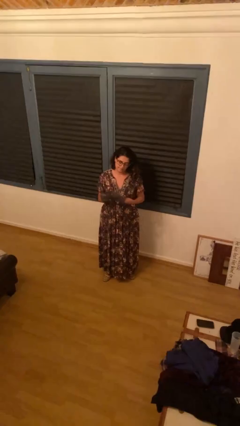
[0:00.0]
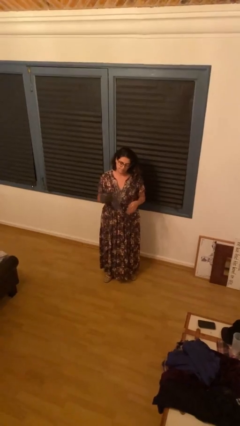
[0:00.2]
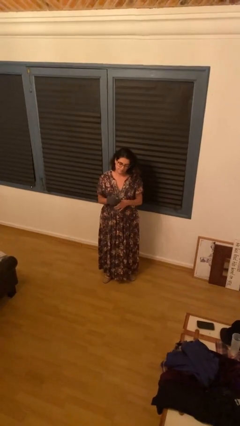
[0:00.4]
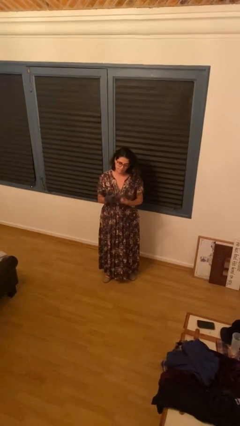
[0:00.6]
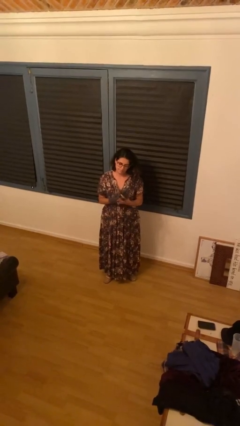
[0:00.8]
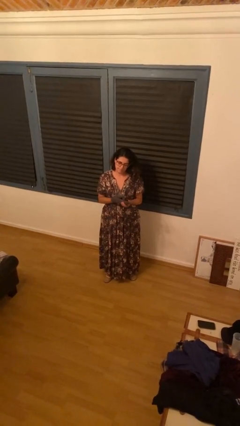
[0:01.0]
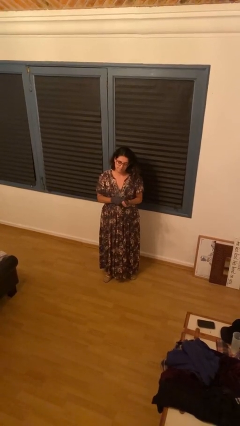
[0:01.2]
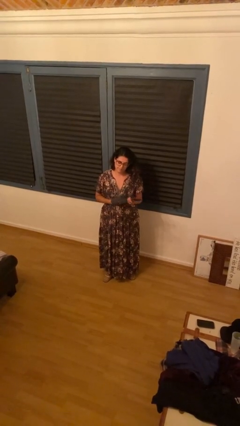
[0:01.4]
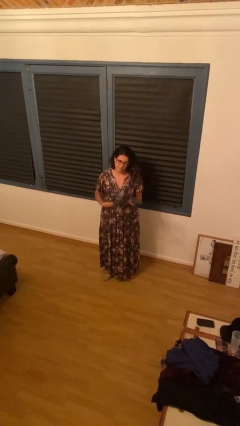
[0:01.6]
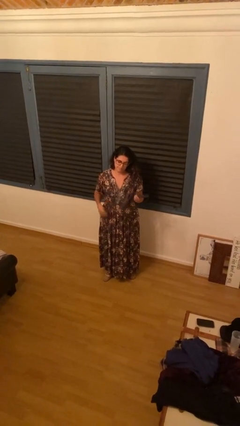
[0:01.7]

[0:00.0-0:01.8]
person takes off gloves

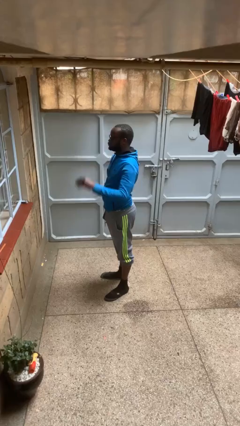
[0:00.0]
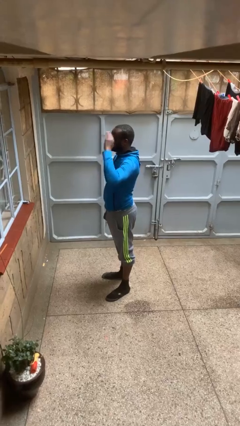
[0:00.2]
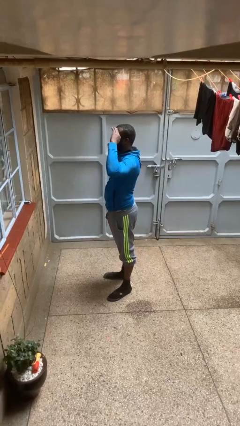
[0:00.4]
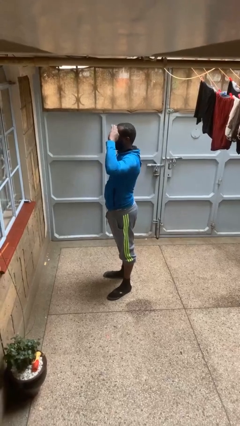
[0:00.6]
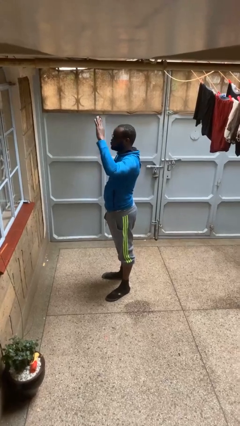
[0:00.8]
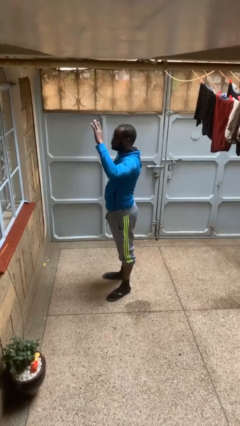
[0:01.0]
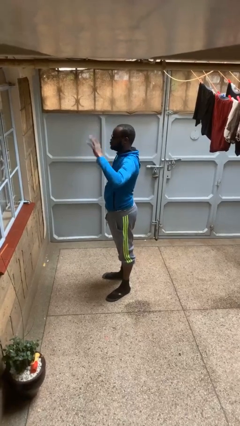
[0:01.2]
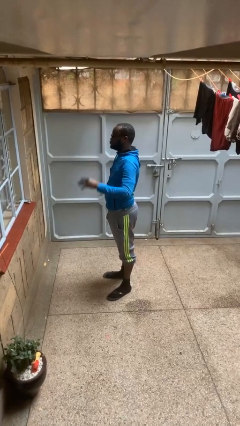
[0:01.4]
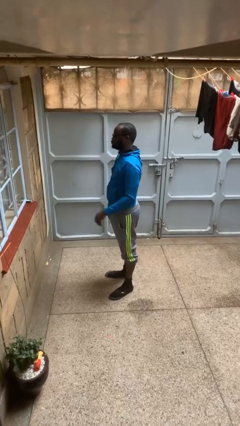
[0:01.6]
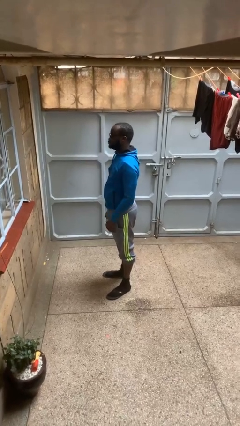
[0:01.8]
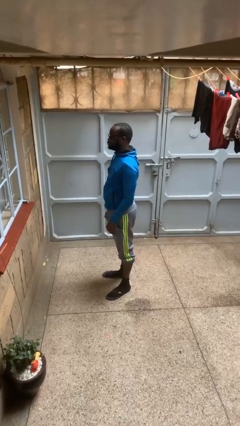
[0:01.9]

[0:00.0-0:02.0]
person salutes

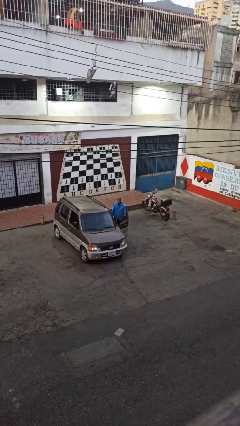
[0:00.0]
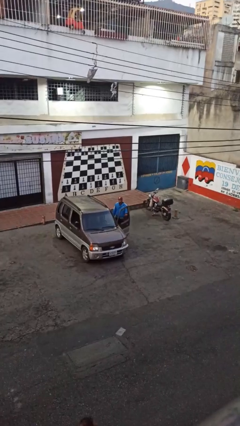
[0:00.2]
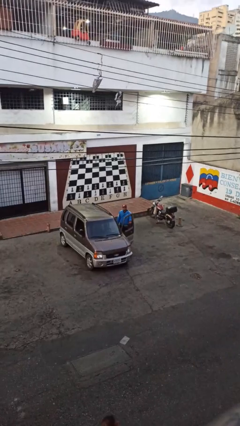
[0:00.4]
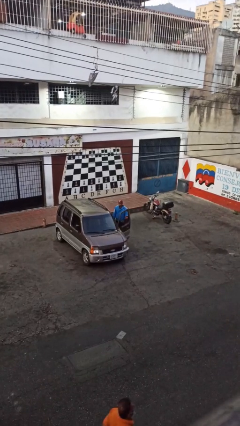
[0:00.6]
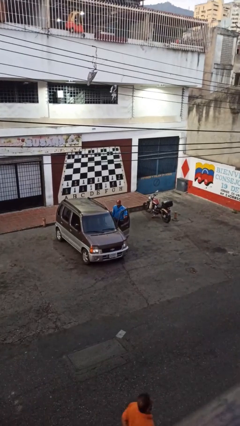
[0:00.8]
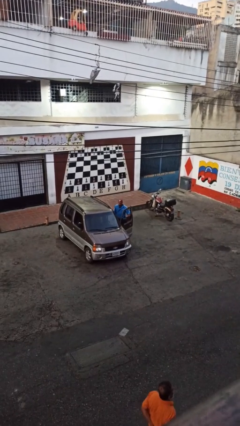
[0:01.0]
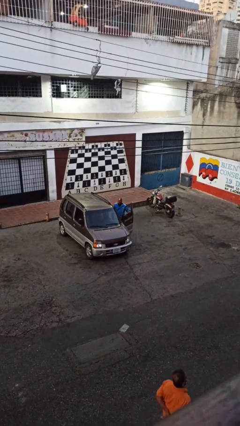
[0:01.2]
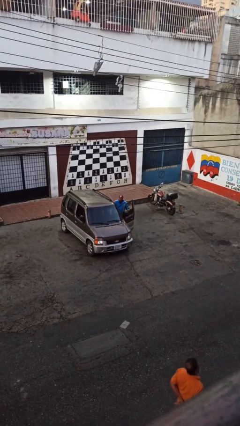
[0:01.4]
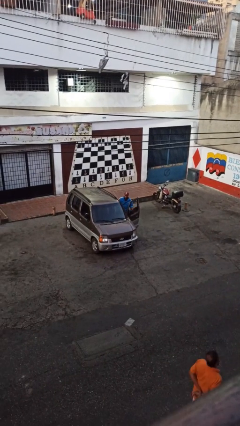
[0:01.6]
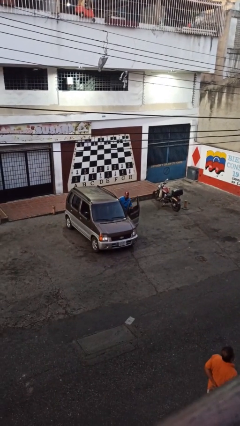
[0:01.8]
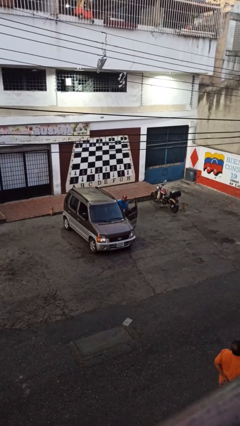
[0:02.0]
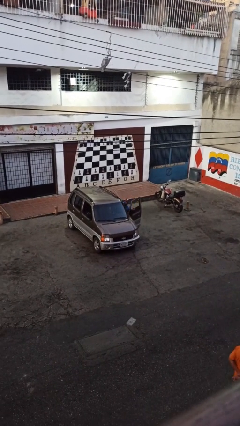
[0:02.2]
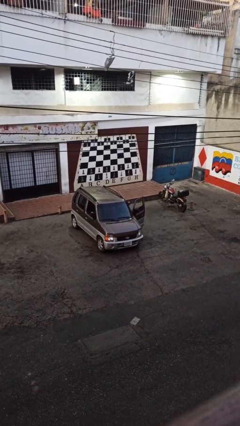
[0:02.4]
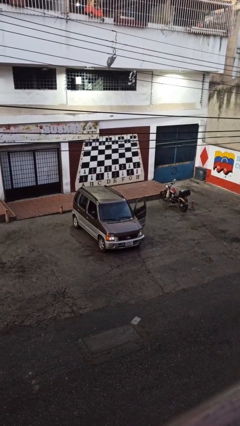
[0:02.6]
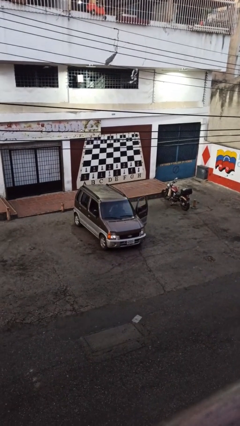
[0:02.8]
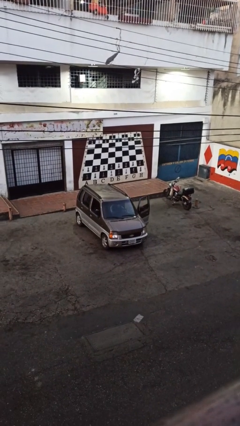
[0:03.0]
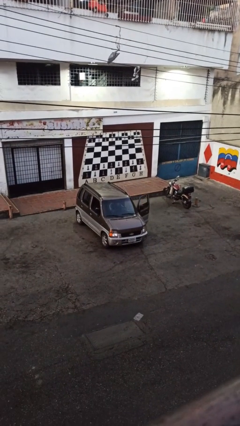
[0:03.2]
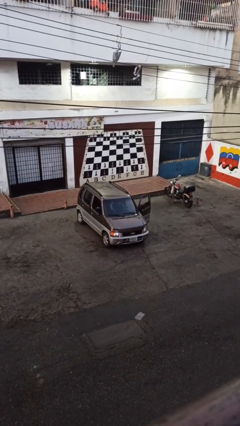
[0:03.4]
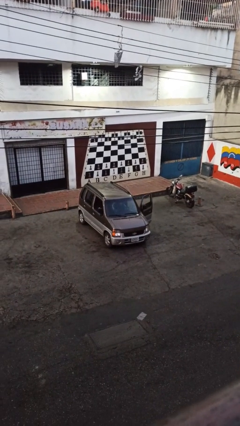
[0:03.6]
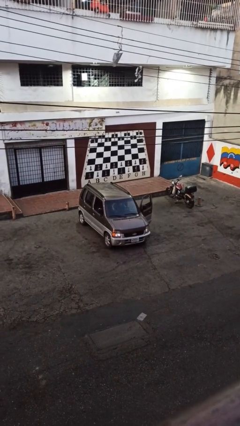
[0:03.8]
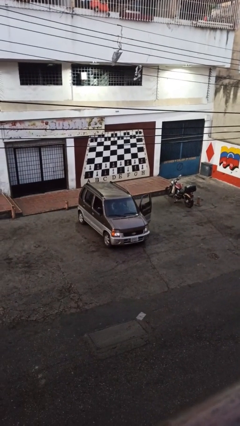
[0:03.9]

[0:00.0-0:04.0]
person enters car

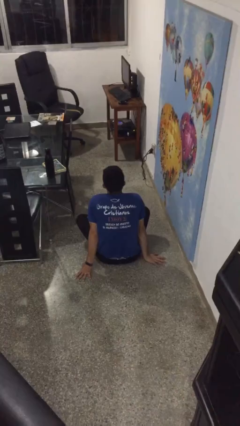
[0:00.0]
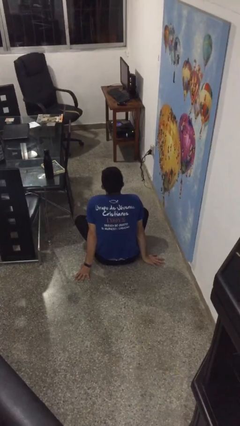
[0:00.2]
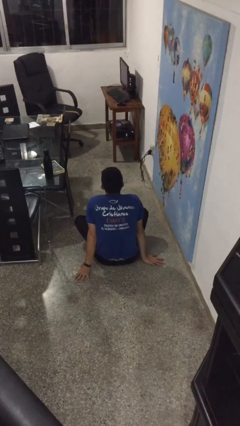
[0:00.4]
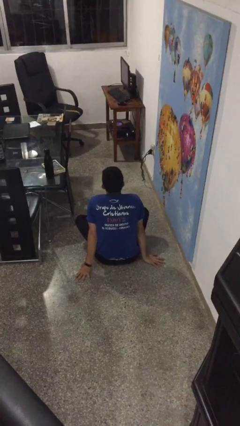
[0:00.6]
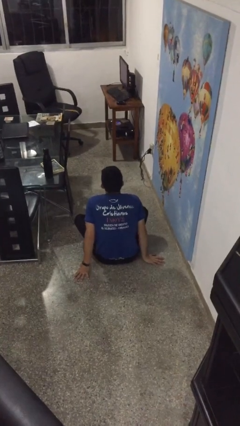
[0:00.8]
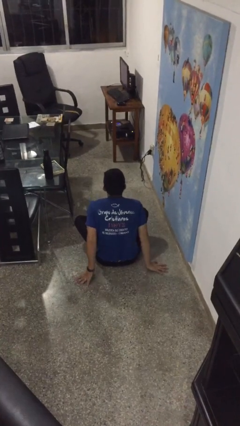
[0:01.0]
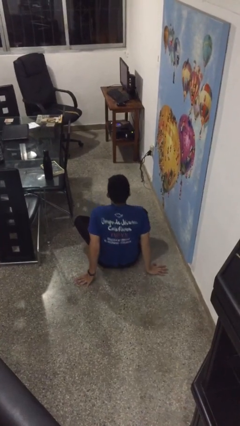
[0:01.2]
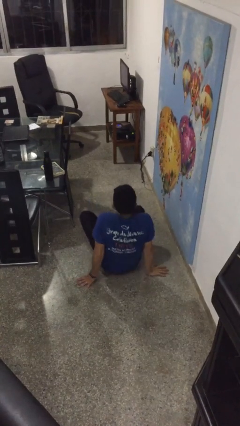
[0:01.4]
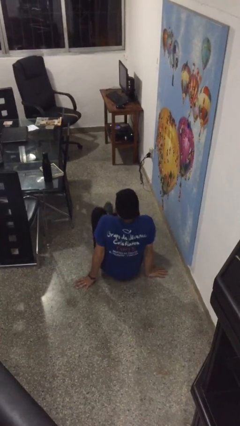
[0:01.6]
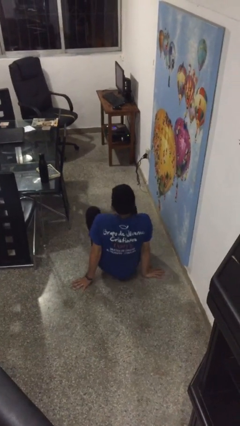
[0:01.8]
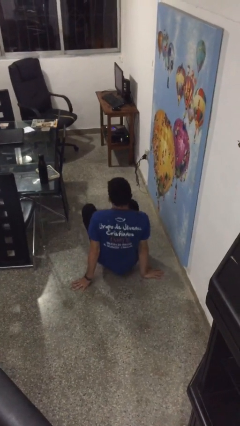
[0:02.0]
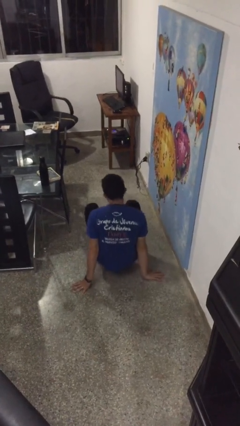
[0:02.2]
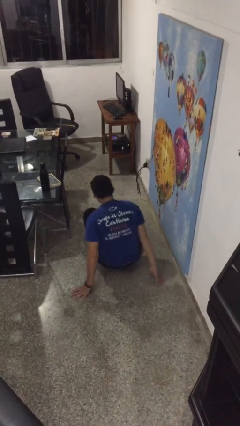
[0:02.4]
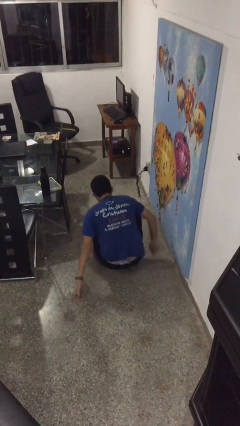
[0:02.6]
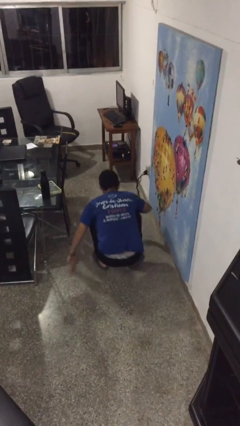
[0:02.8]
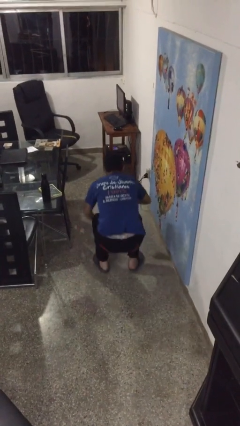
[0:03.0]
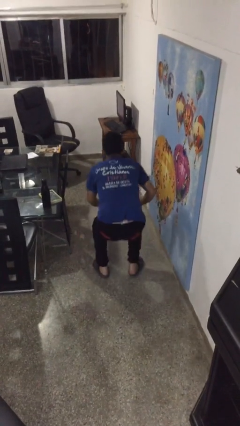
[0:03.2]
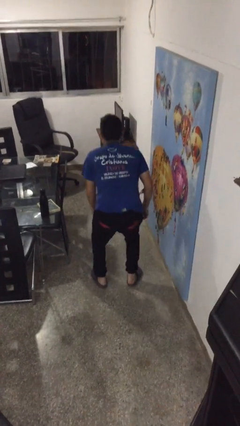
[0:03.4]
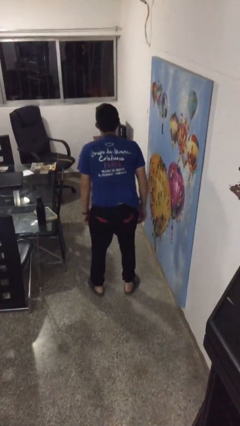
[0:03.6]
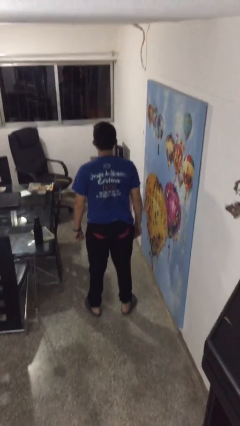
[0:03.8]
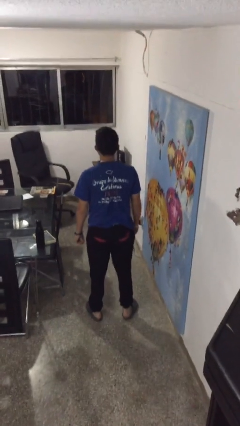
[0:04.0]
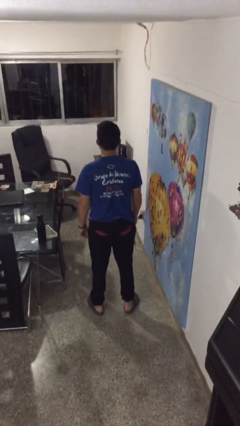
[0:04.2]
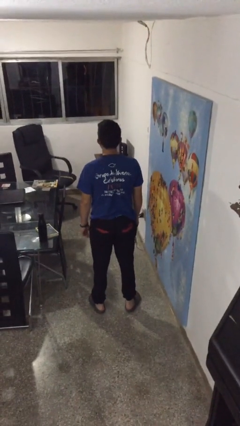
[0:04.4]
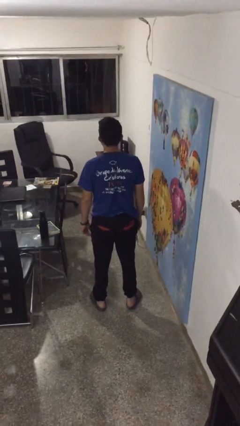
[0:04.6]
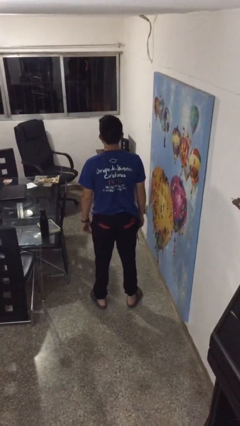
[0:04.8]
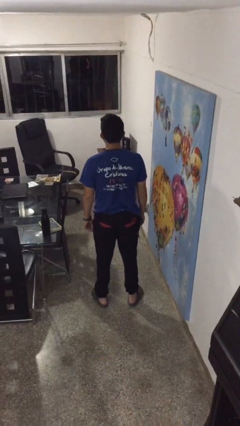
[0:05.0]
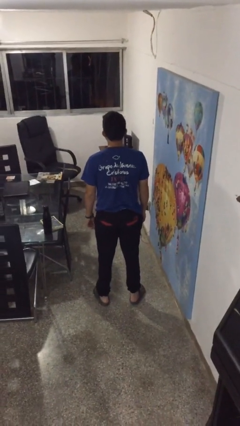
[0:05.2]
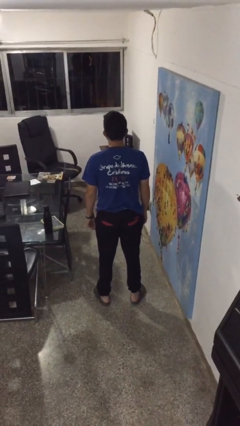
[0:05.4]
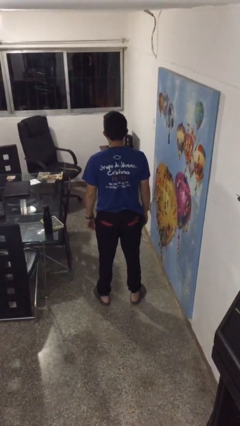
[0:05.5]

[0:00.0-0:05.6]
person stands up from floor

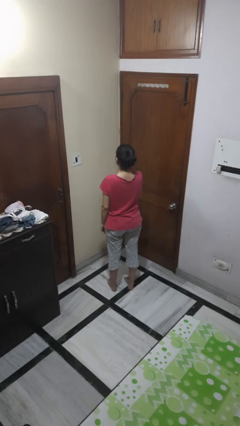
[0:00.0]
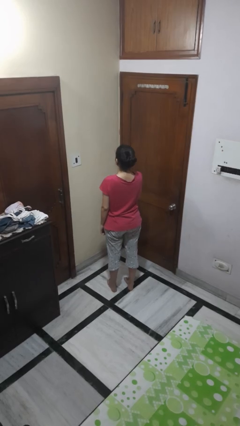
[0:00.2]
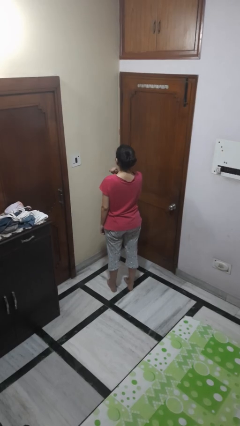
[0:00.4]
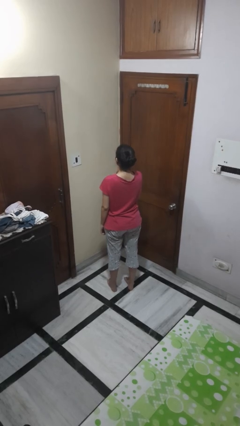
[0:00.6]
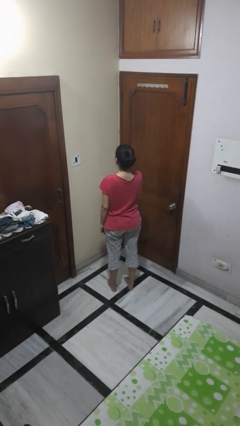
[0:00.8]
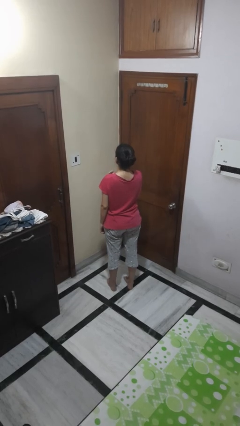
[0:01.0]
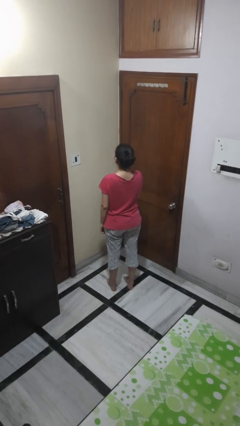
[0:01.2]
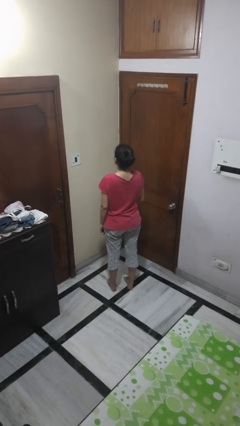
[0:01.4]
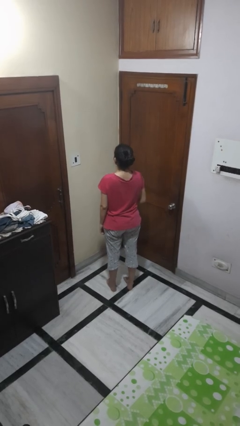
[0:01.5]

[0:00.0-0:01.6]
person gestures cut

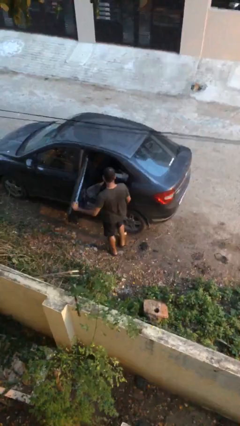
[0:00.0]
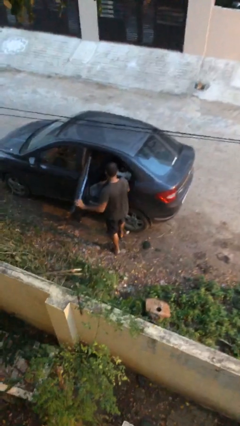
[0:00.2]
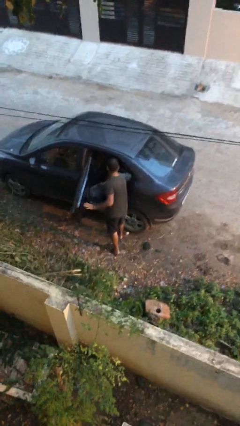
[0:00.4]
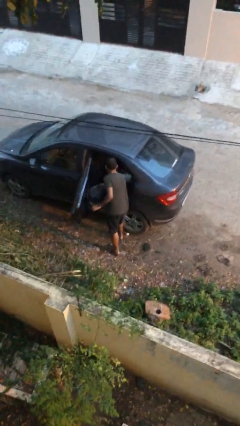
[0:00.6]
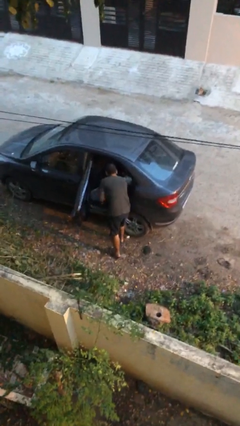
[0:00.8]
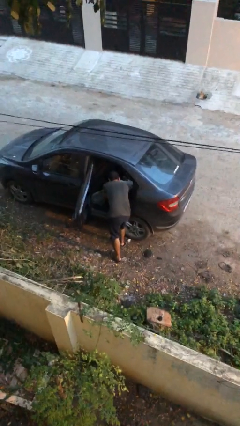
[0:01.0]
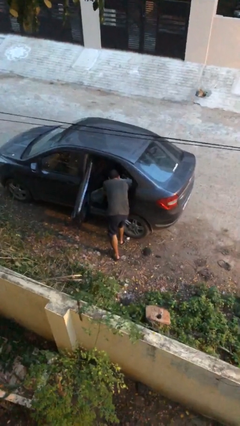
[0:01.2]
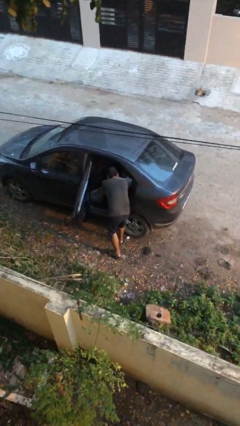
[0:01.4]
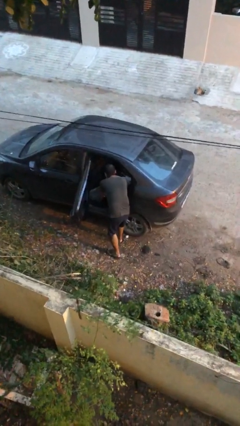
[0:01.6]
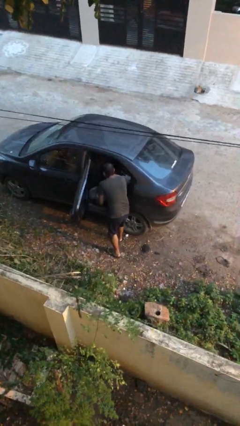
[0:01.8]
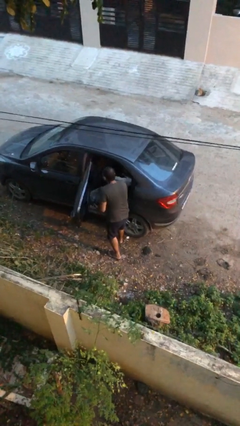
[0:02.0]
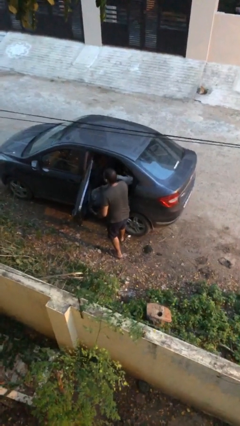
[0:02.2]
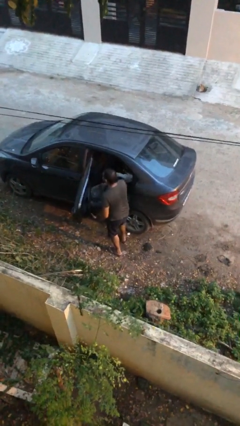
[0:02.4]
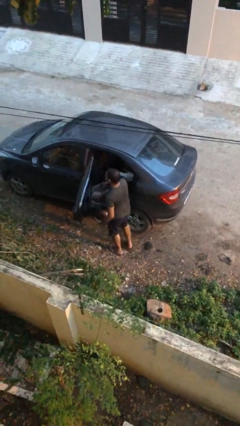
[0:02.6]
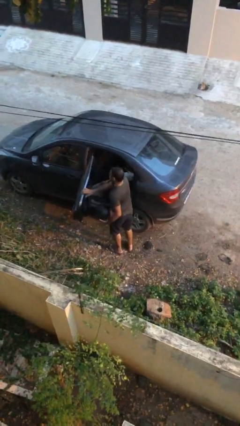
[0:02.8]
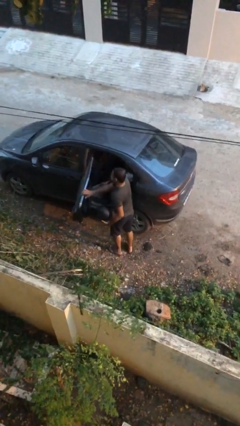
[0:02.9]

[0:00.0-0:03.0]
person unloads car
